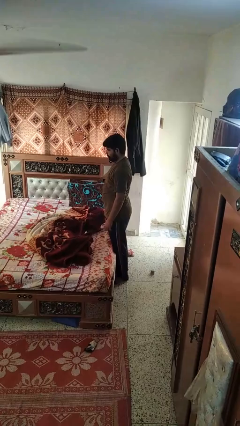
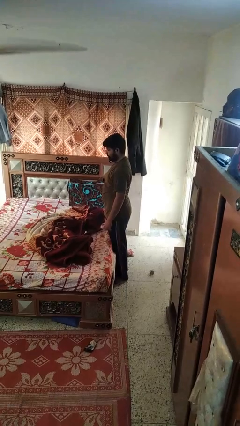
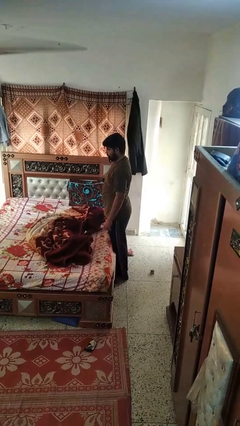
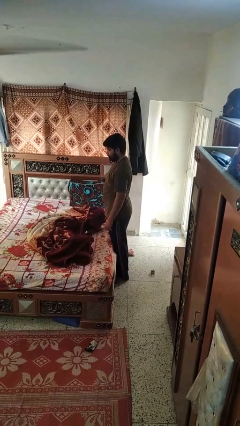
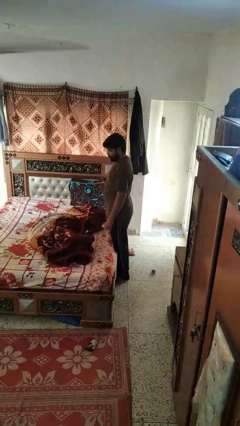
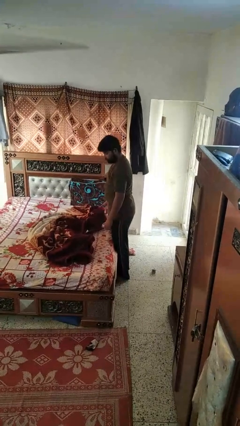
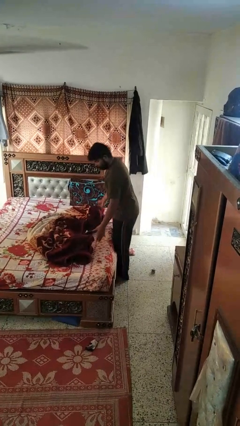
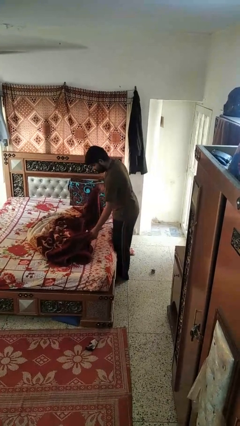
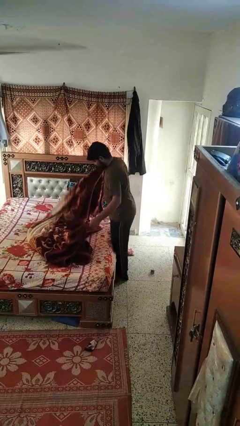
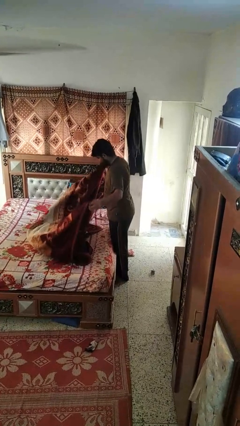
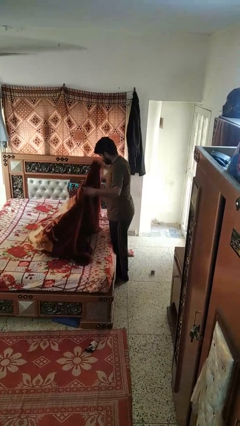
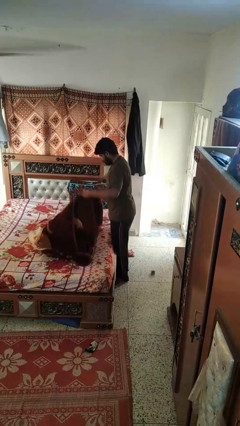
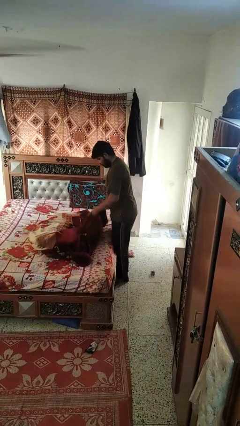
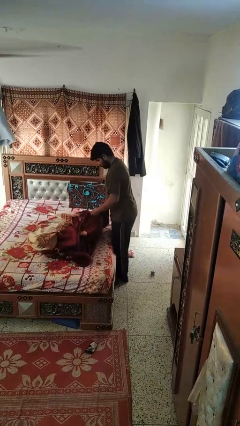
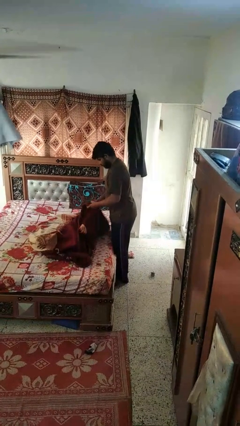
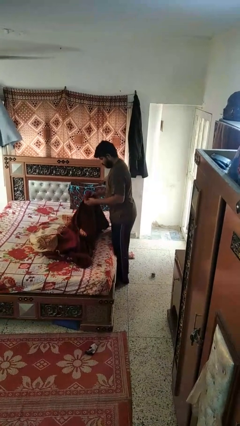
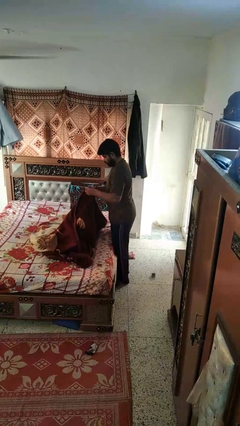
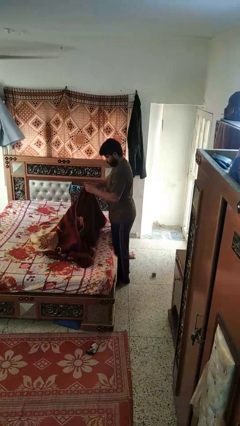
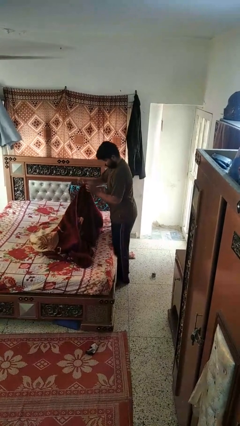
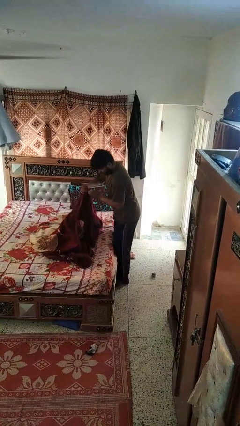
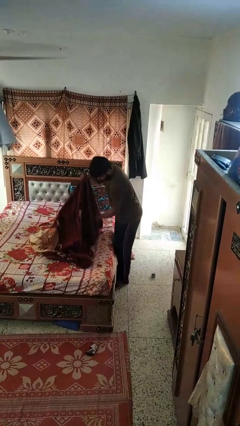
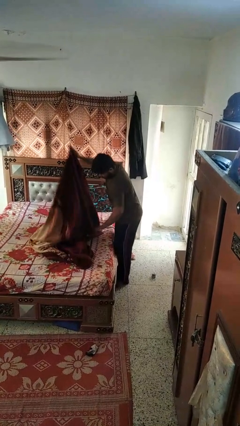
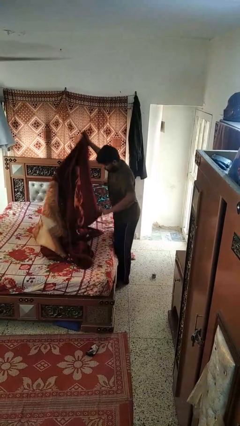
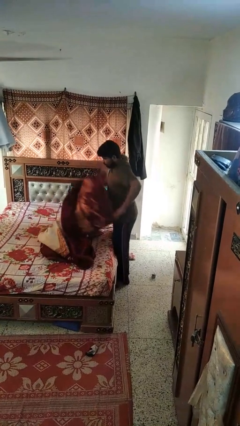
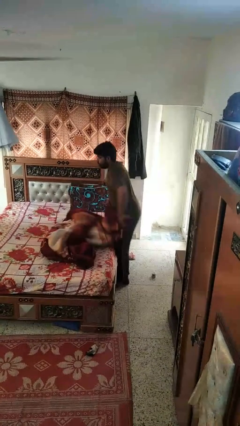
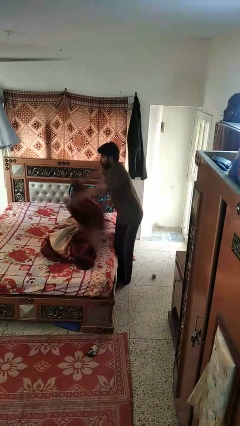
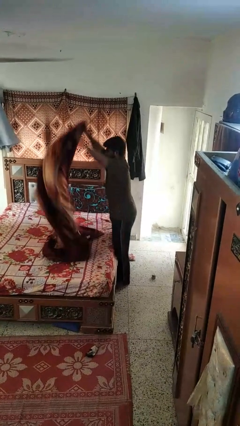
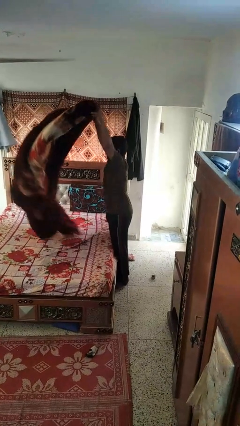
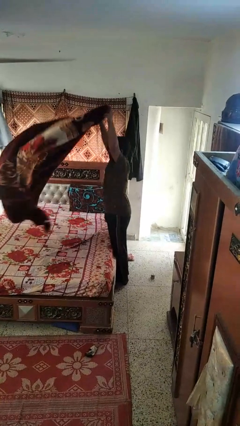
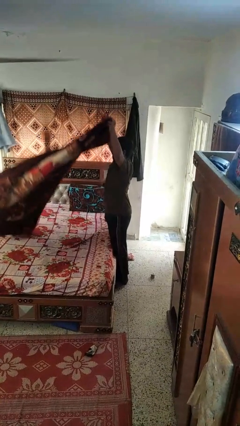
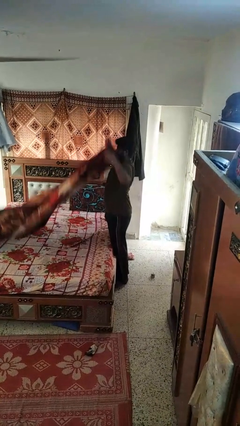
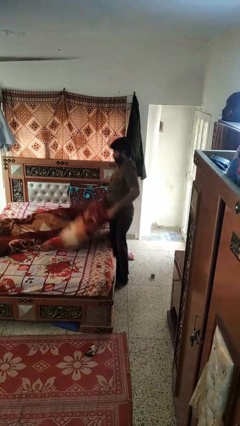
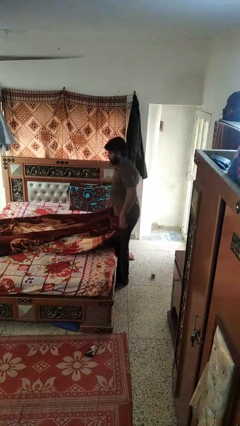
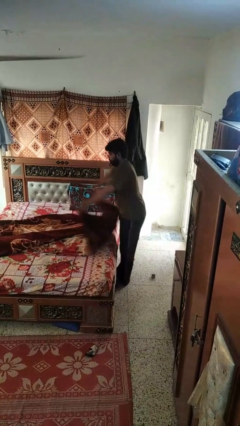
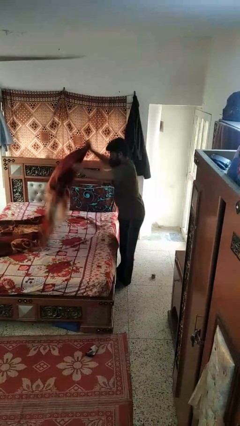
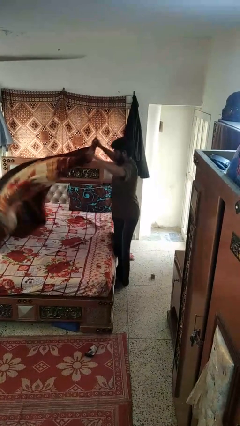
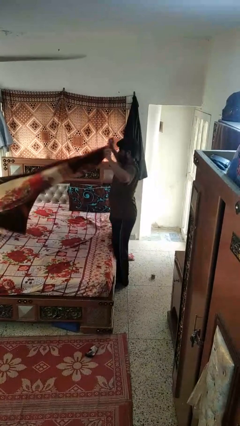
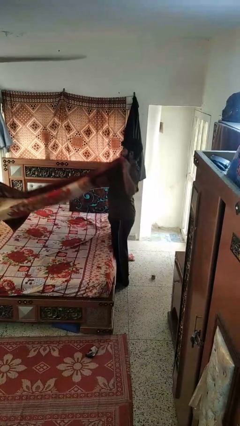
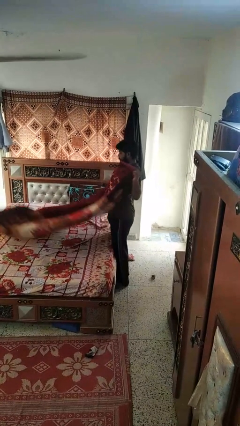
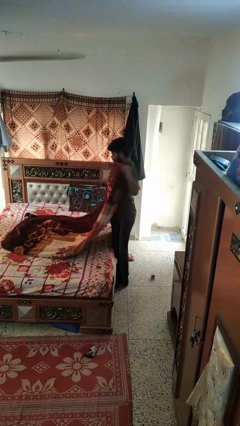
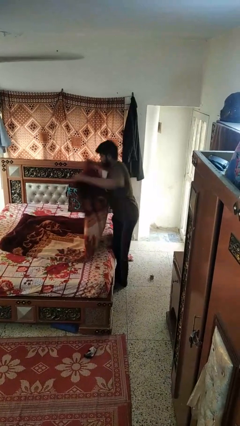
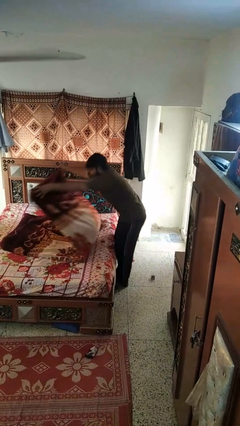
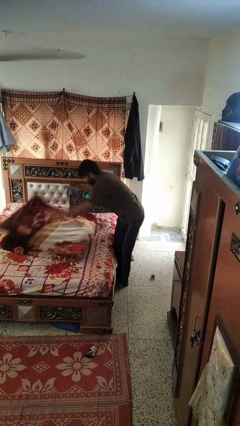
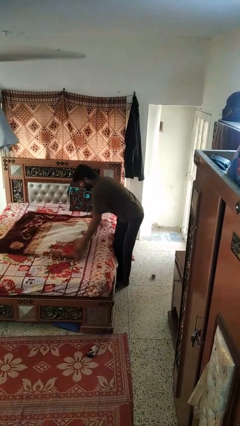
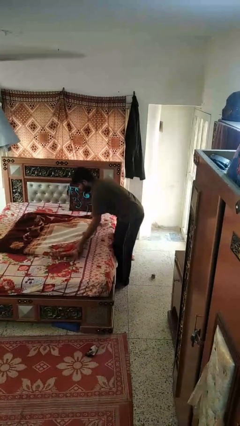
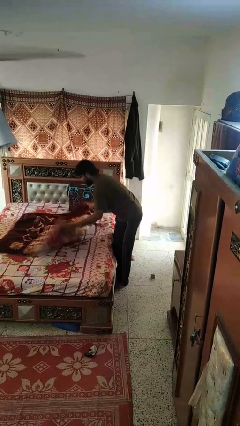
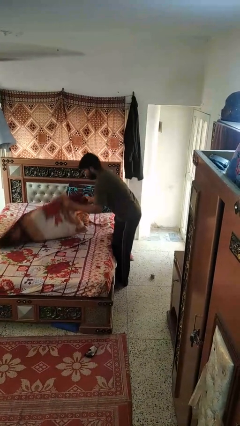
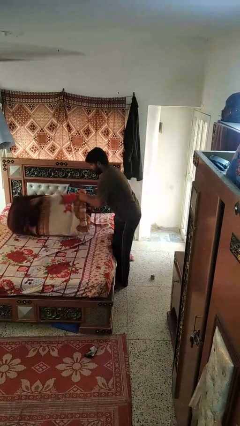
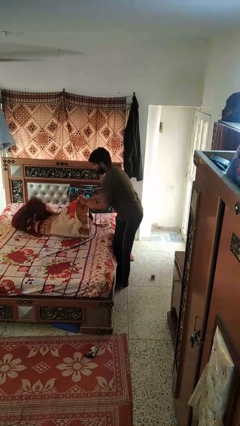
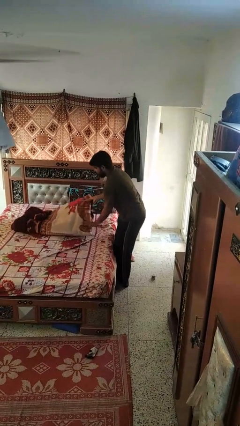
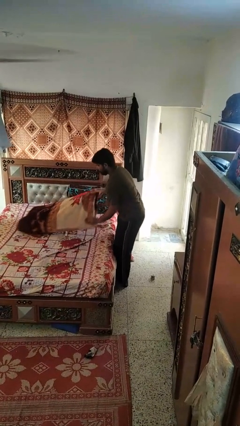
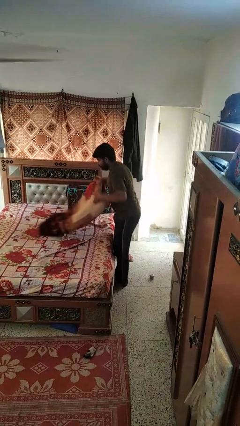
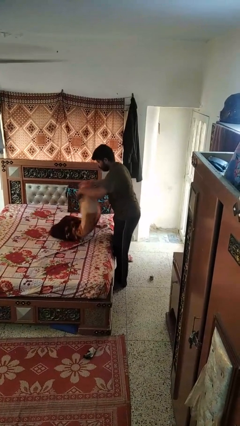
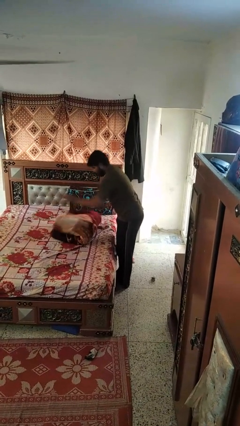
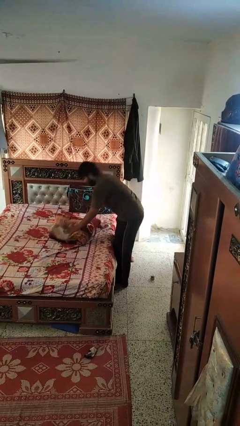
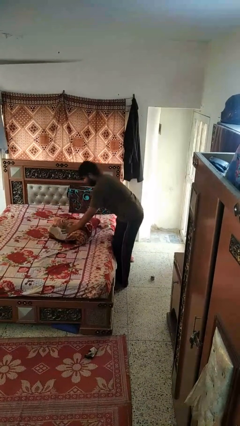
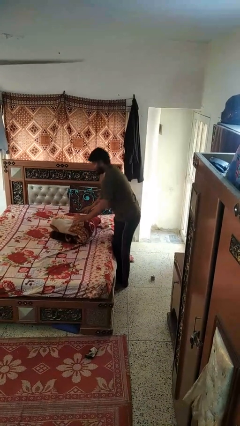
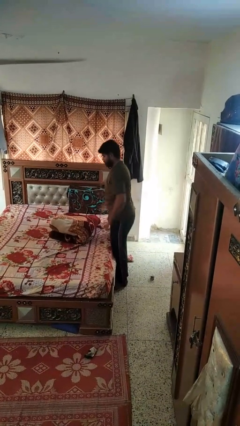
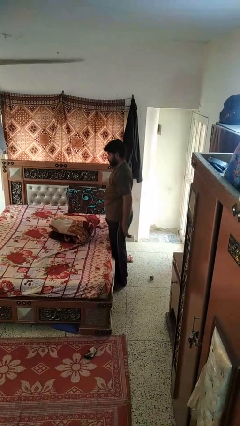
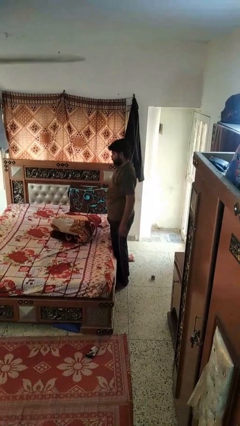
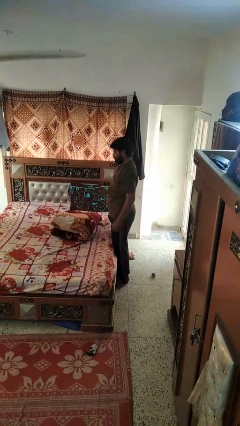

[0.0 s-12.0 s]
person folds blanket

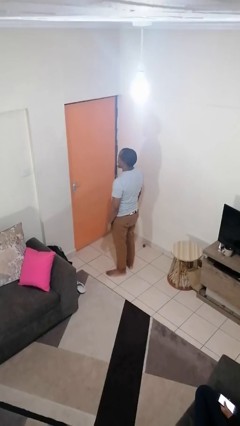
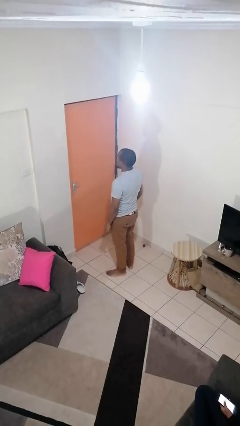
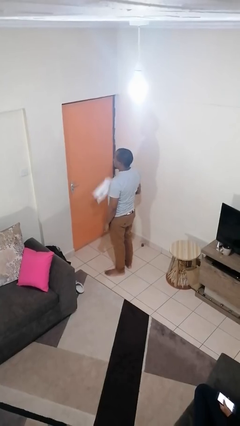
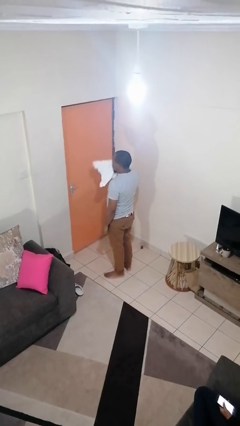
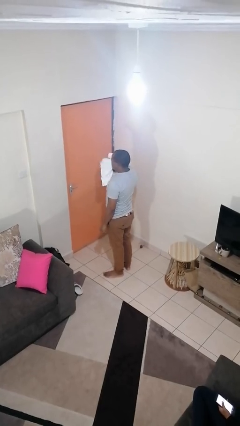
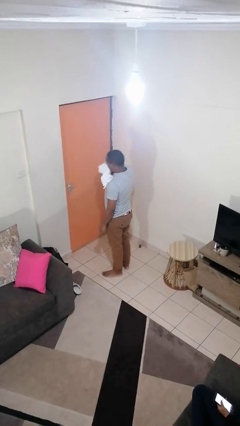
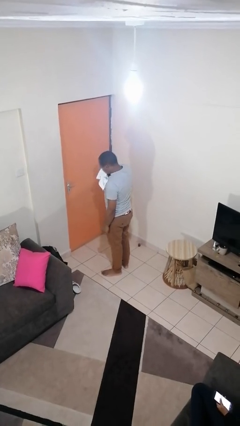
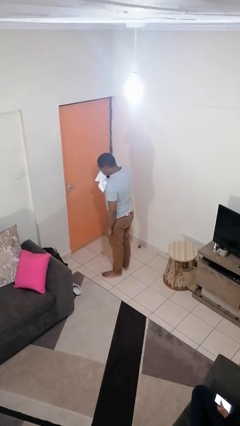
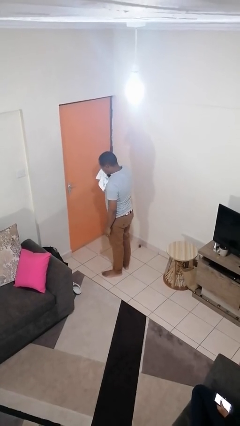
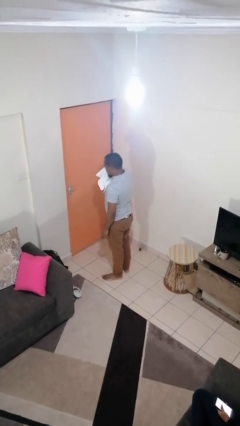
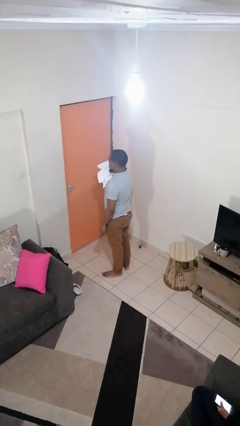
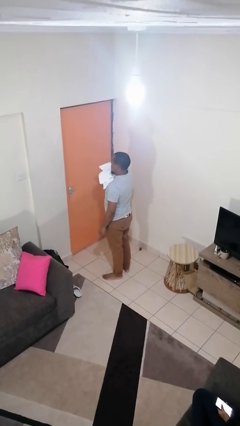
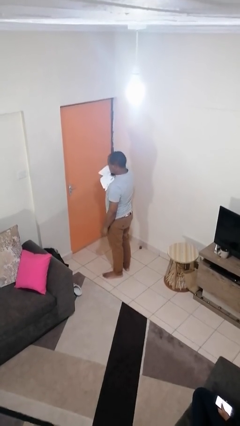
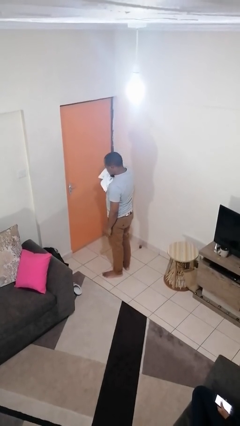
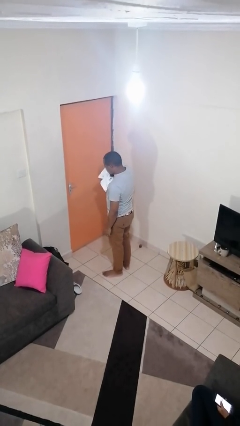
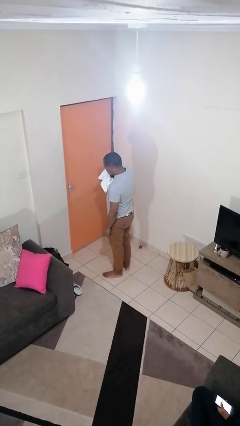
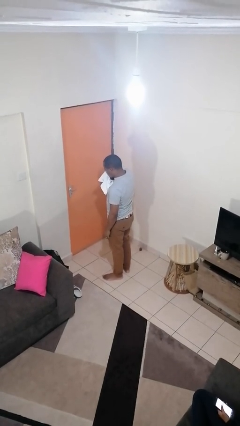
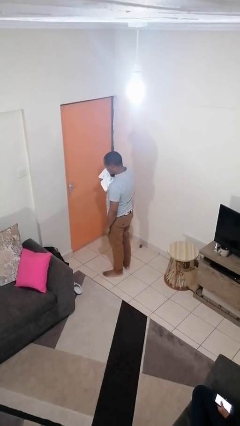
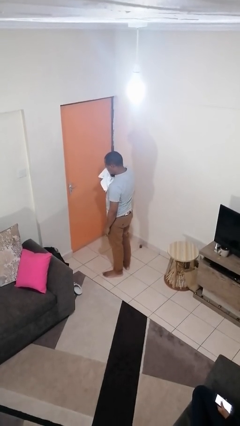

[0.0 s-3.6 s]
person blows nose

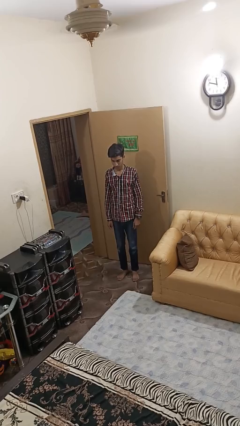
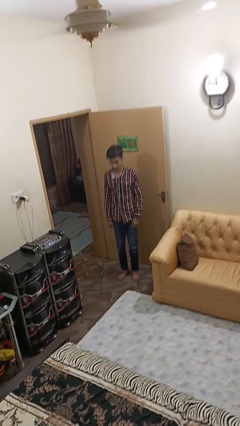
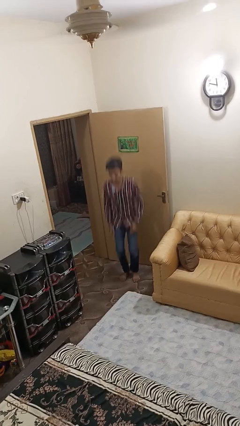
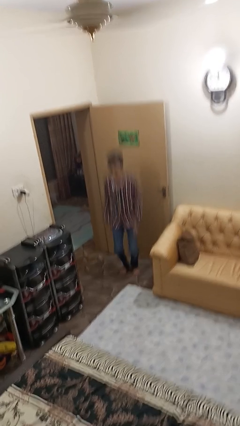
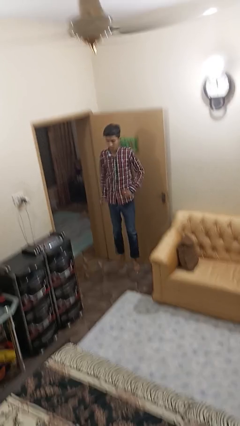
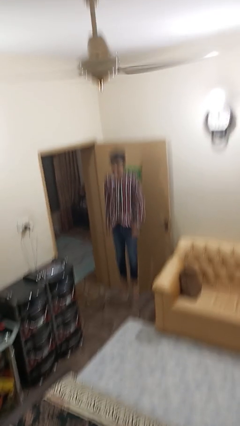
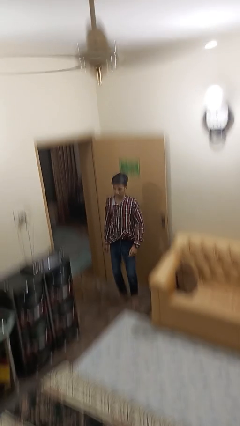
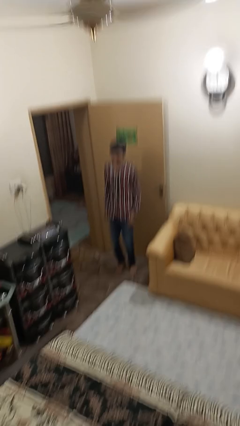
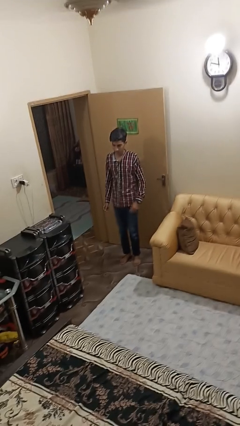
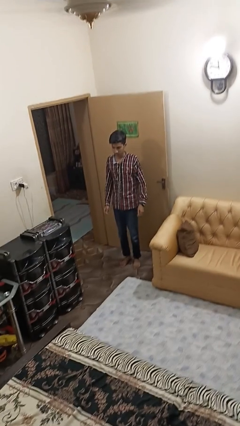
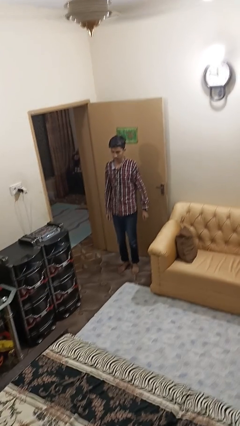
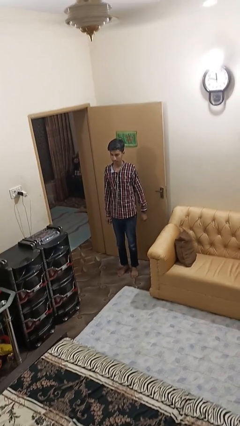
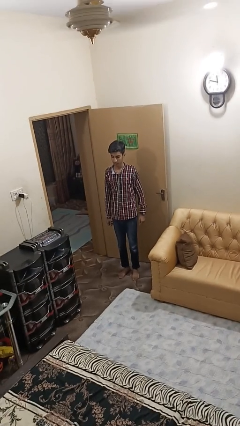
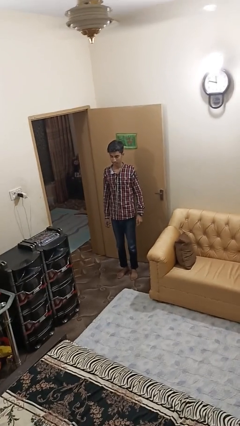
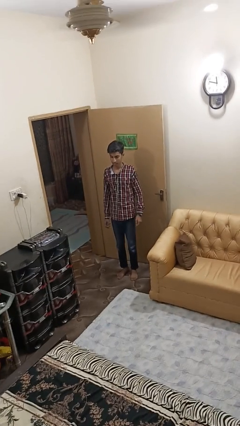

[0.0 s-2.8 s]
person jumps
